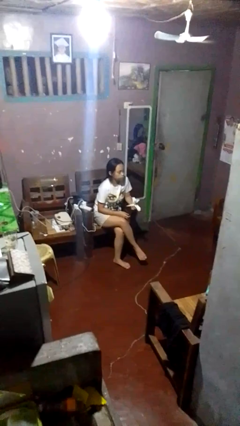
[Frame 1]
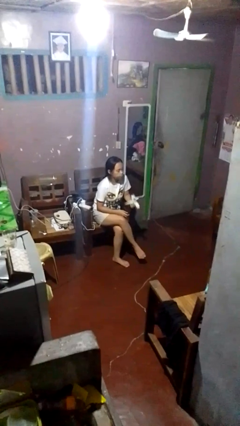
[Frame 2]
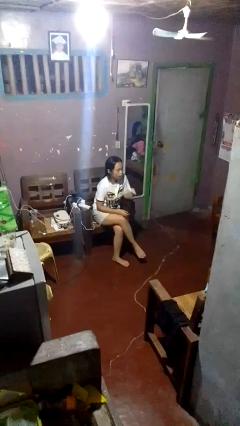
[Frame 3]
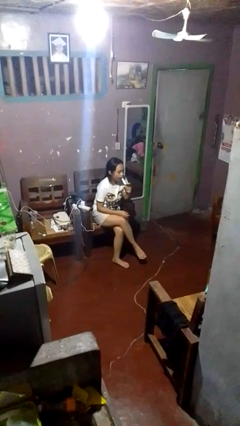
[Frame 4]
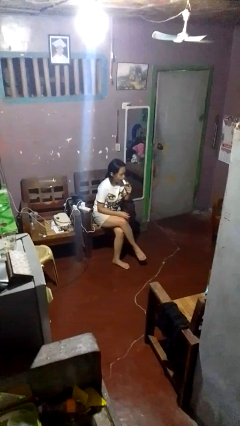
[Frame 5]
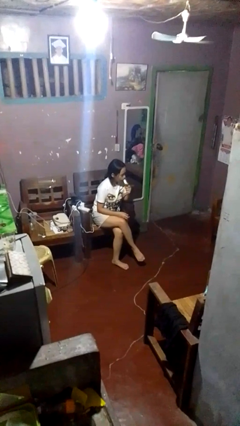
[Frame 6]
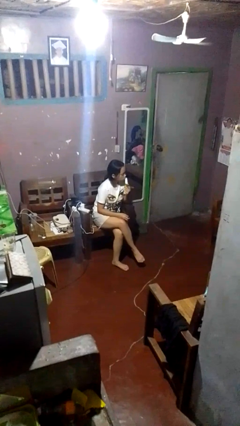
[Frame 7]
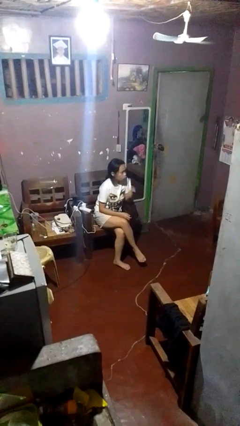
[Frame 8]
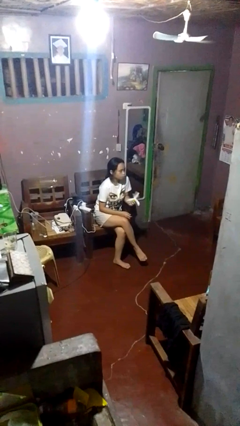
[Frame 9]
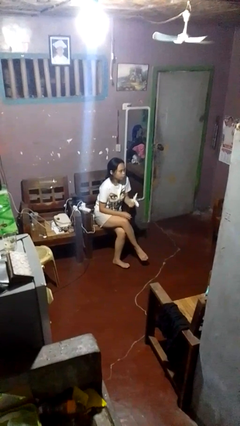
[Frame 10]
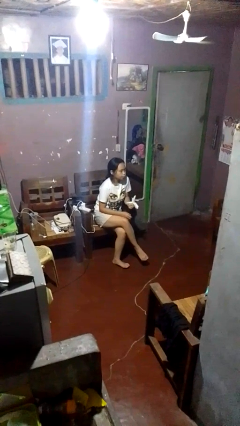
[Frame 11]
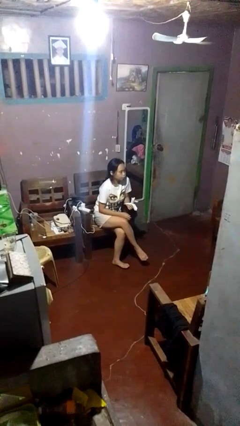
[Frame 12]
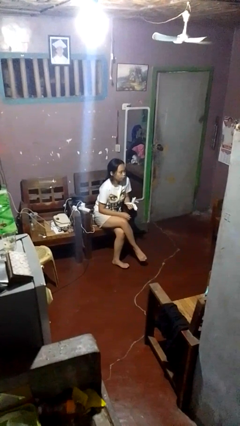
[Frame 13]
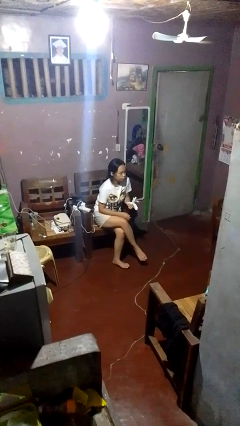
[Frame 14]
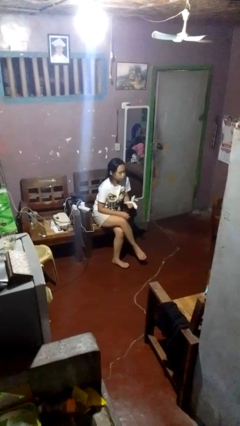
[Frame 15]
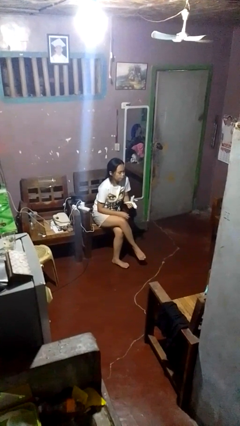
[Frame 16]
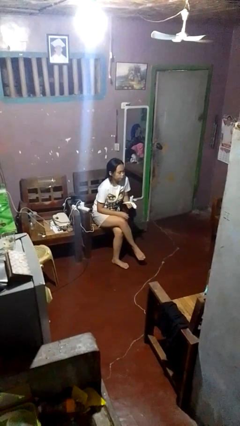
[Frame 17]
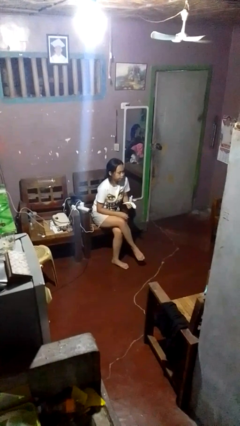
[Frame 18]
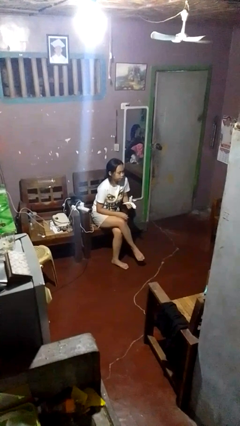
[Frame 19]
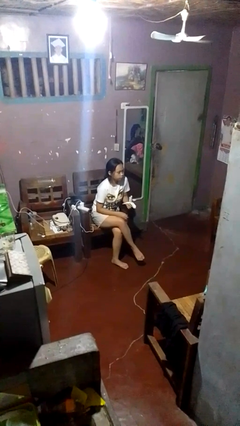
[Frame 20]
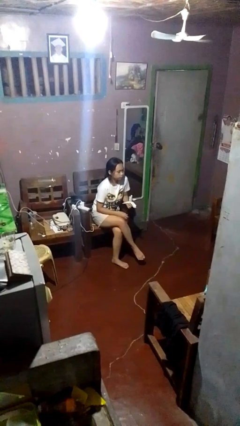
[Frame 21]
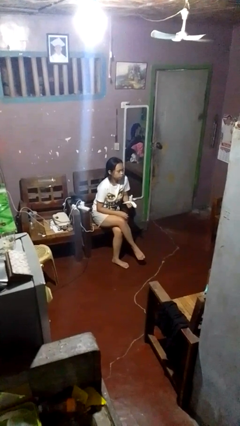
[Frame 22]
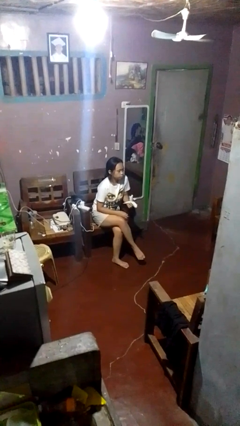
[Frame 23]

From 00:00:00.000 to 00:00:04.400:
person eats banana

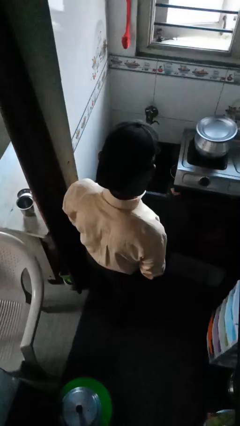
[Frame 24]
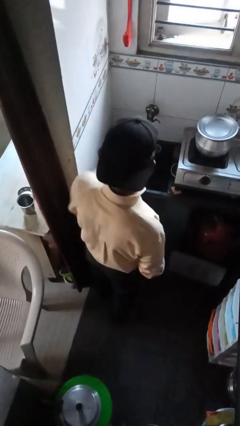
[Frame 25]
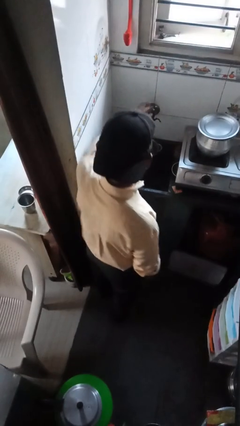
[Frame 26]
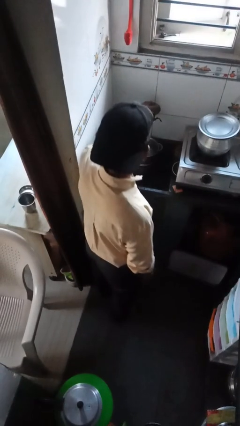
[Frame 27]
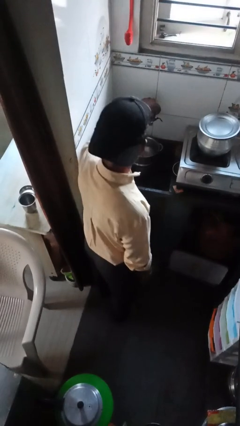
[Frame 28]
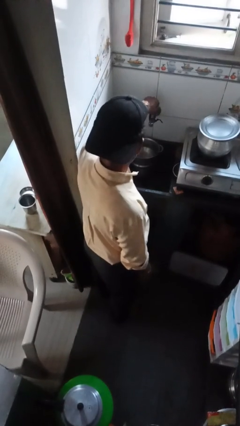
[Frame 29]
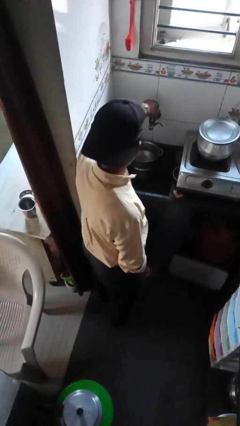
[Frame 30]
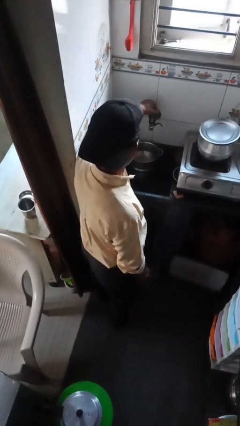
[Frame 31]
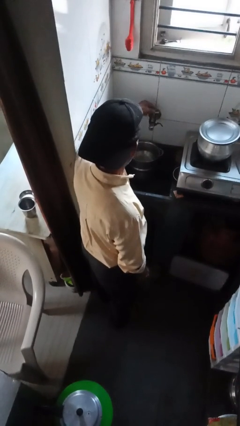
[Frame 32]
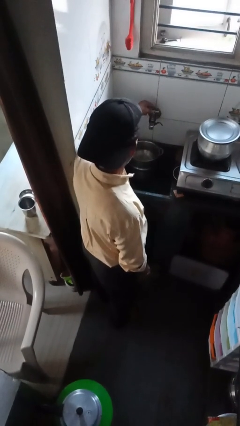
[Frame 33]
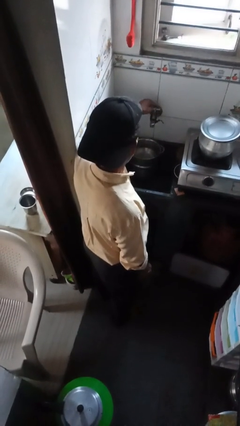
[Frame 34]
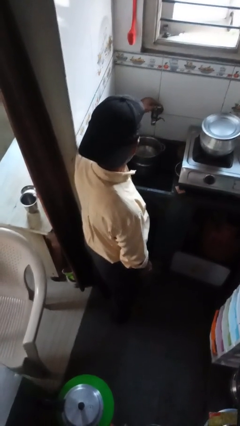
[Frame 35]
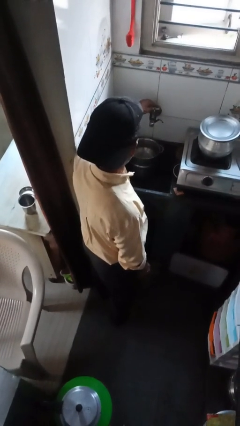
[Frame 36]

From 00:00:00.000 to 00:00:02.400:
person turns on faucet

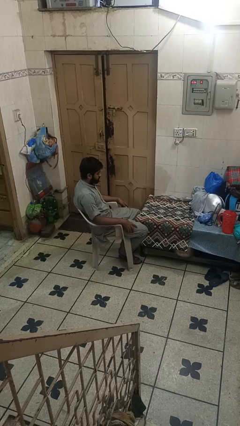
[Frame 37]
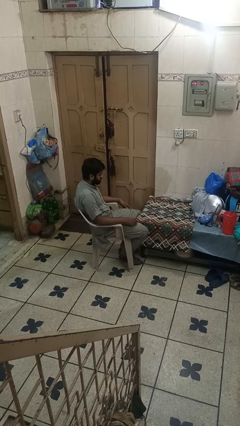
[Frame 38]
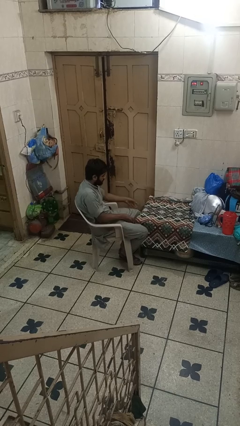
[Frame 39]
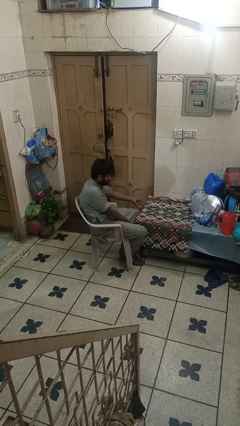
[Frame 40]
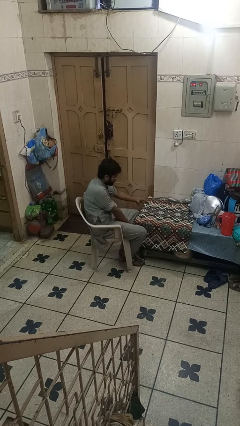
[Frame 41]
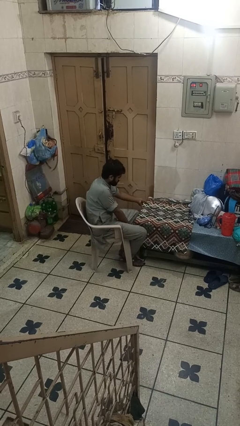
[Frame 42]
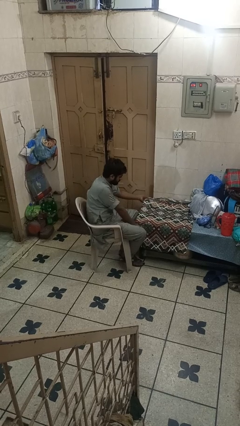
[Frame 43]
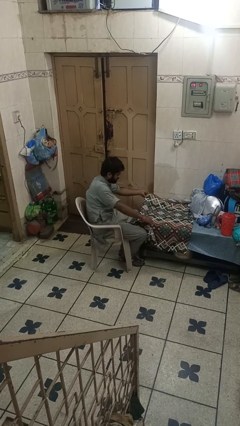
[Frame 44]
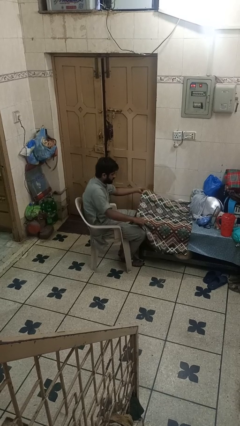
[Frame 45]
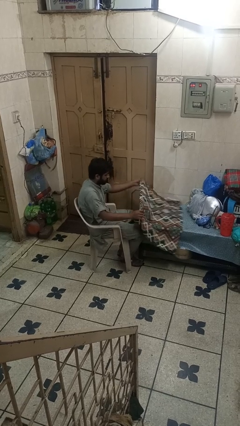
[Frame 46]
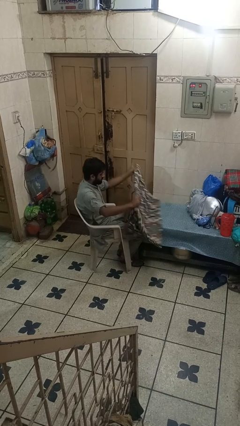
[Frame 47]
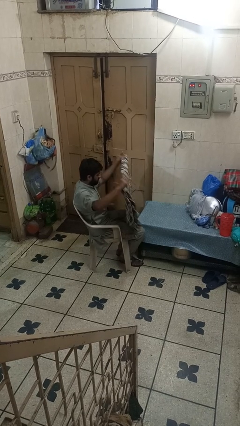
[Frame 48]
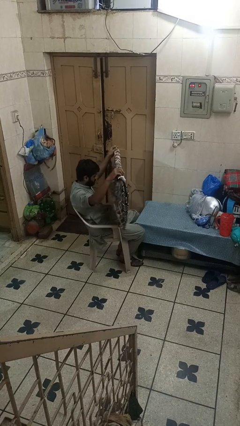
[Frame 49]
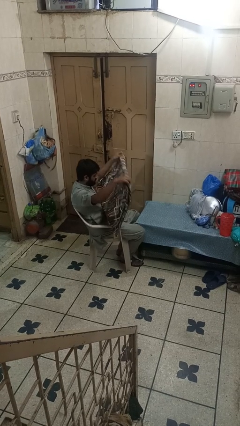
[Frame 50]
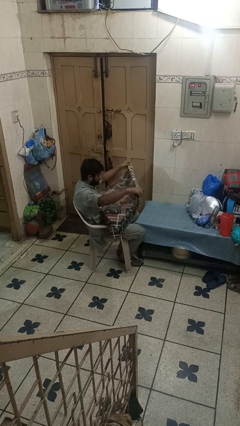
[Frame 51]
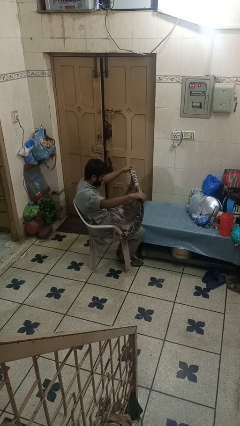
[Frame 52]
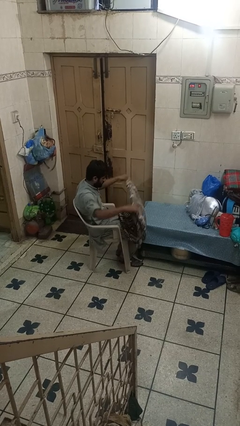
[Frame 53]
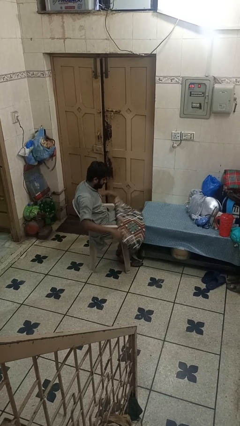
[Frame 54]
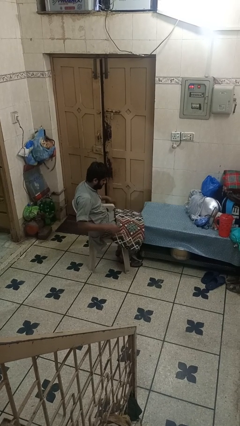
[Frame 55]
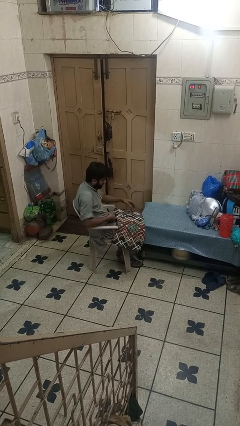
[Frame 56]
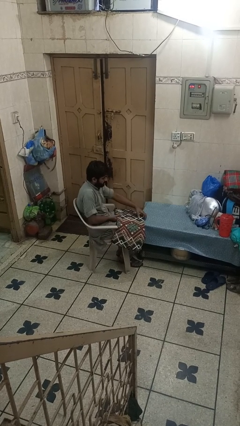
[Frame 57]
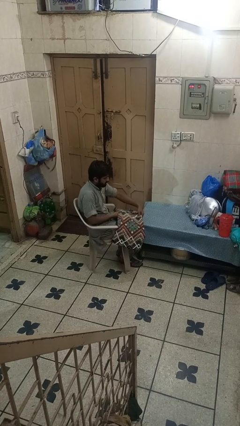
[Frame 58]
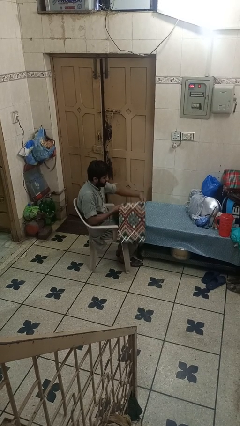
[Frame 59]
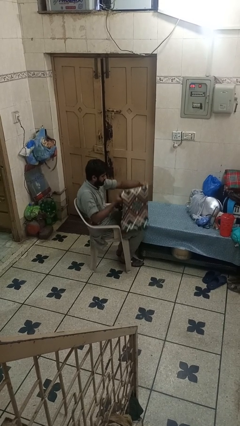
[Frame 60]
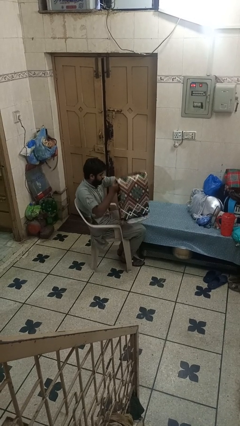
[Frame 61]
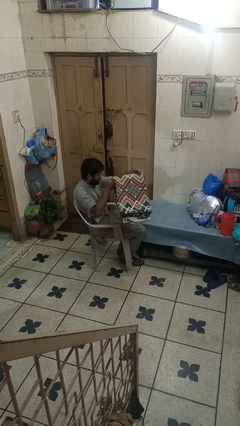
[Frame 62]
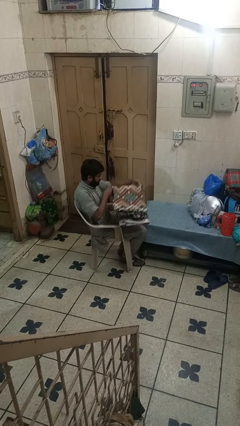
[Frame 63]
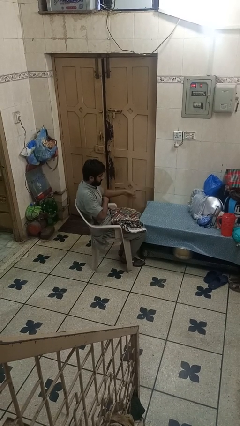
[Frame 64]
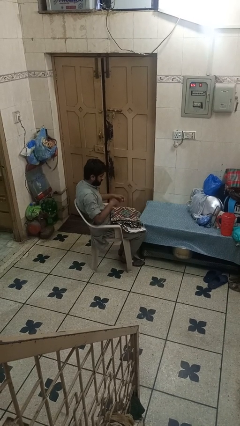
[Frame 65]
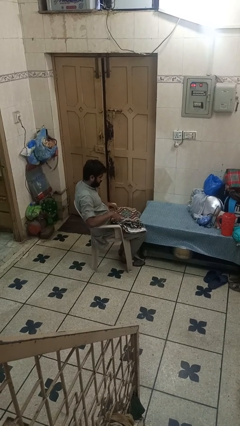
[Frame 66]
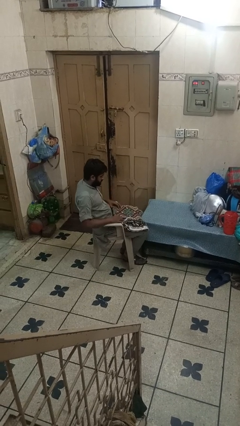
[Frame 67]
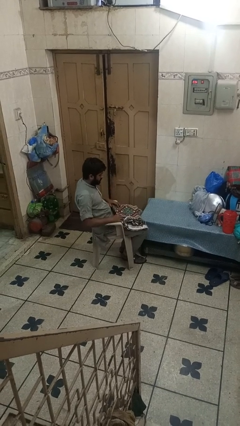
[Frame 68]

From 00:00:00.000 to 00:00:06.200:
person folds tablecloth

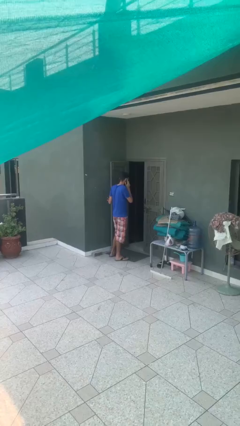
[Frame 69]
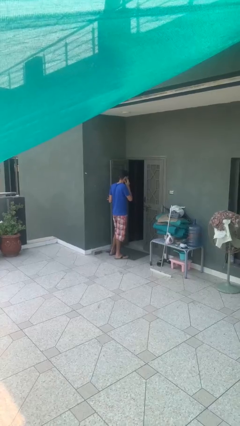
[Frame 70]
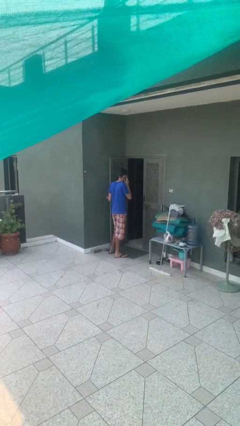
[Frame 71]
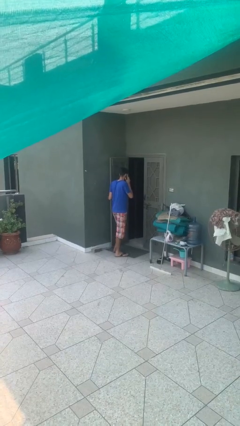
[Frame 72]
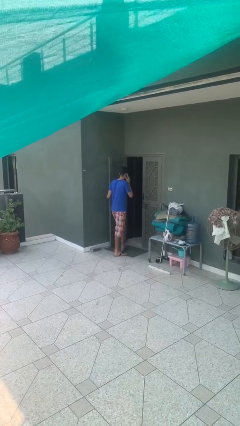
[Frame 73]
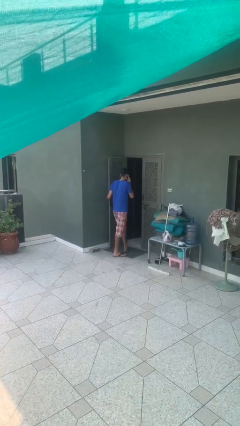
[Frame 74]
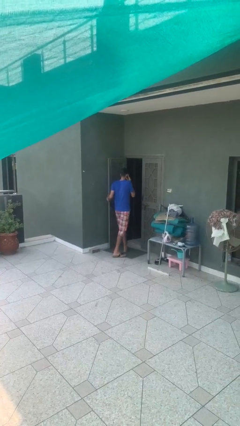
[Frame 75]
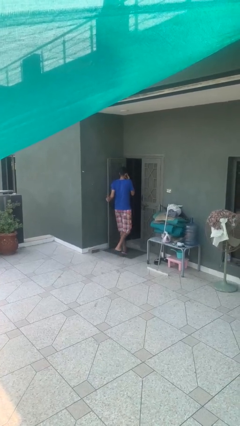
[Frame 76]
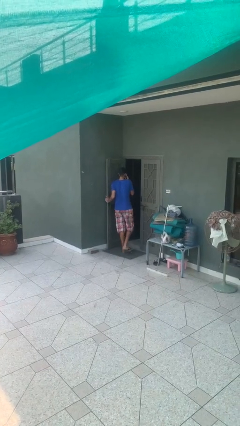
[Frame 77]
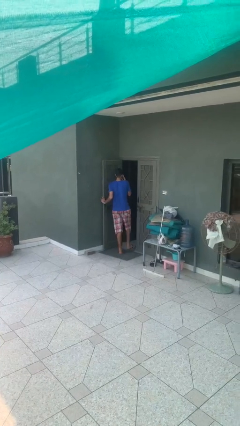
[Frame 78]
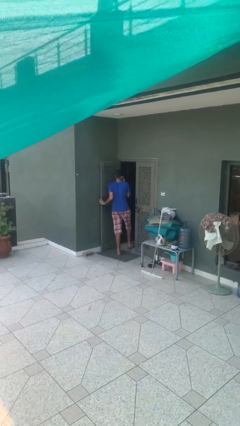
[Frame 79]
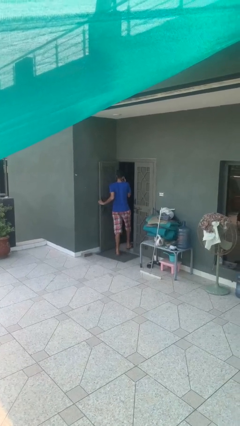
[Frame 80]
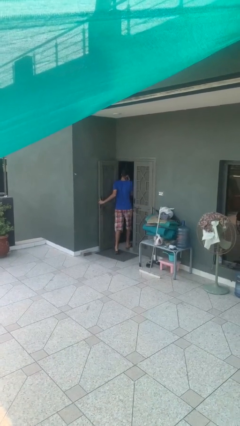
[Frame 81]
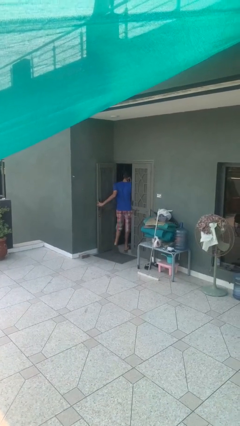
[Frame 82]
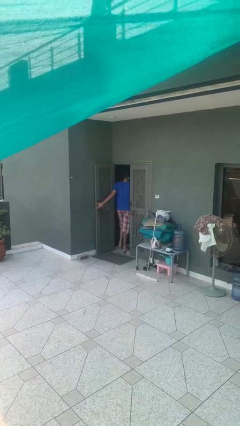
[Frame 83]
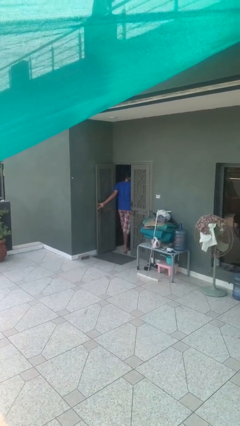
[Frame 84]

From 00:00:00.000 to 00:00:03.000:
person exits scene through structure

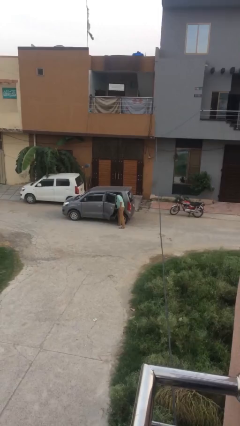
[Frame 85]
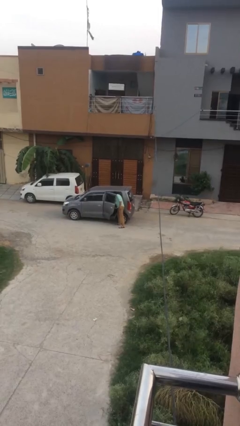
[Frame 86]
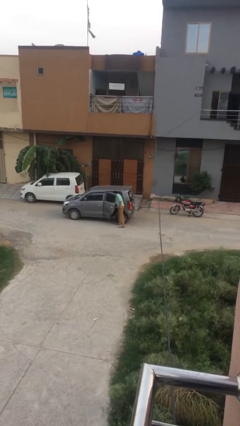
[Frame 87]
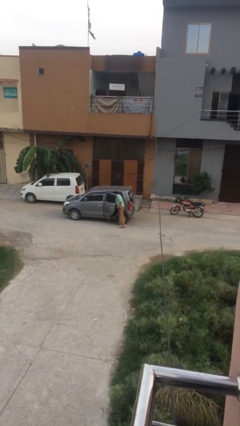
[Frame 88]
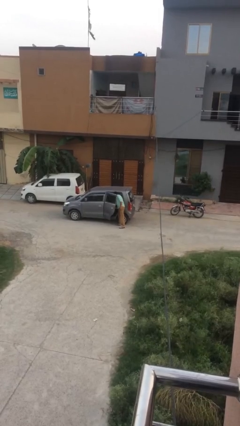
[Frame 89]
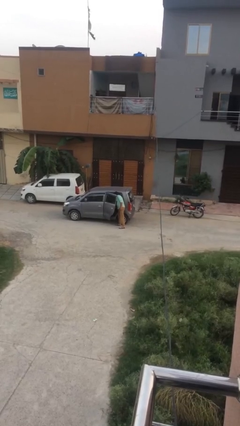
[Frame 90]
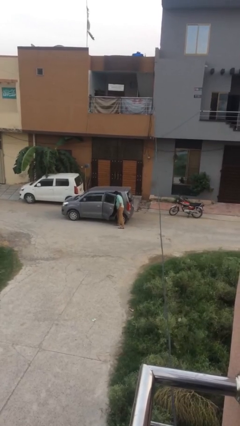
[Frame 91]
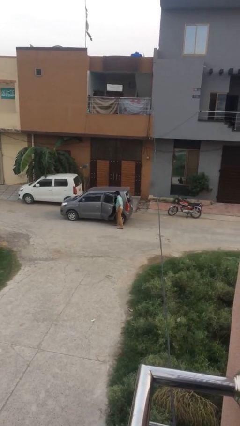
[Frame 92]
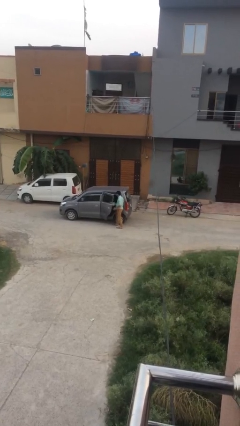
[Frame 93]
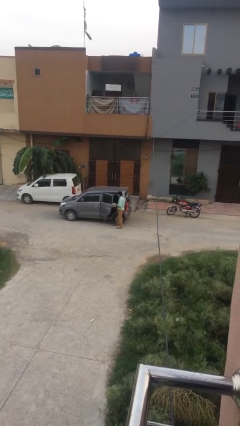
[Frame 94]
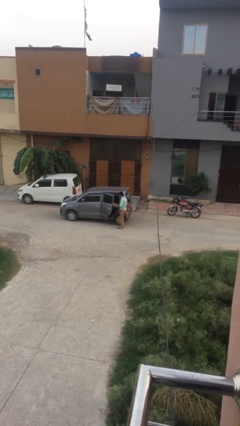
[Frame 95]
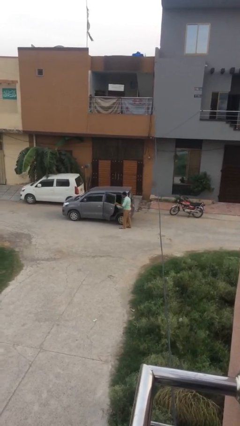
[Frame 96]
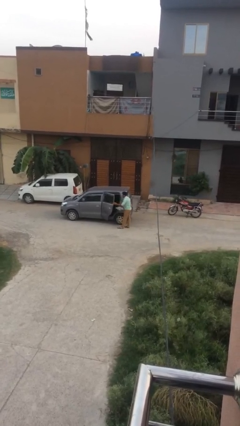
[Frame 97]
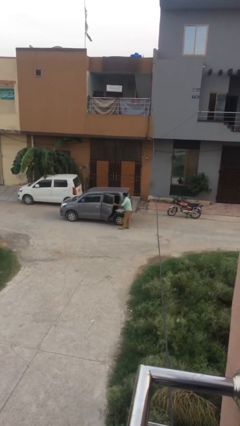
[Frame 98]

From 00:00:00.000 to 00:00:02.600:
person unloads car
